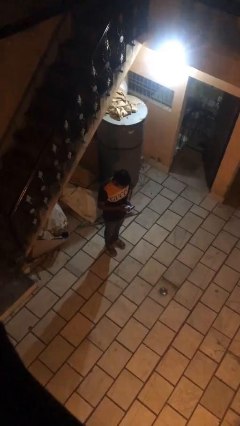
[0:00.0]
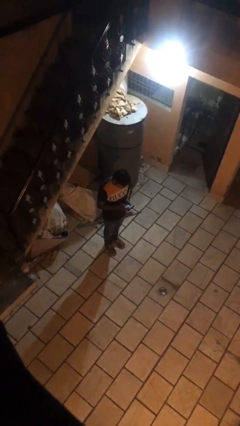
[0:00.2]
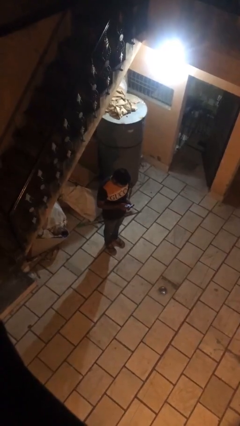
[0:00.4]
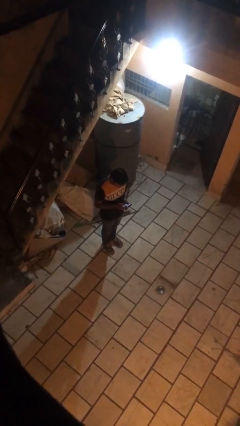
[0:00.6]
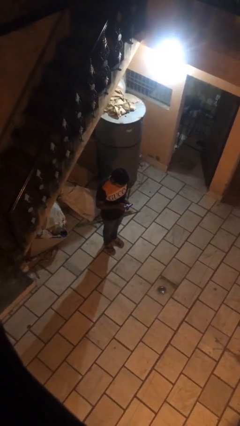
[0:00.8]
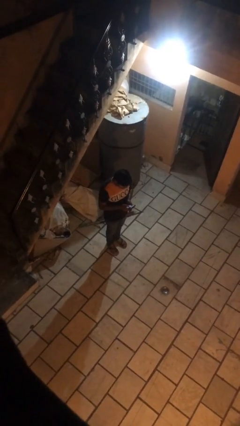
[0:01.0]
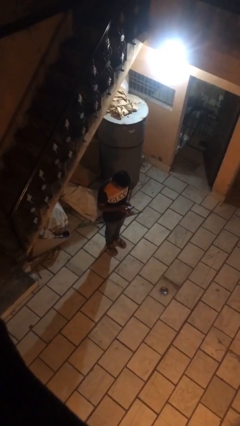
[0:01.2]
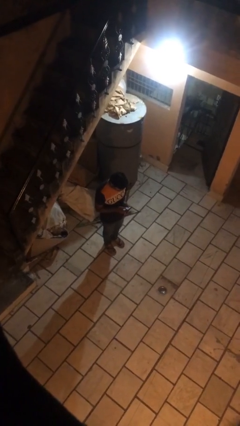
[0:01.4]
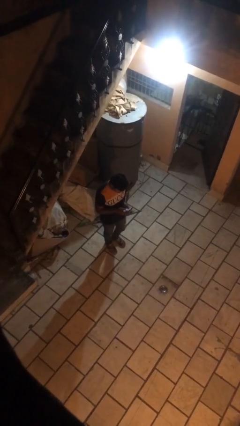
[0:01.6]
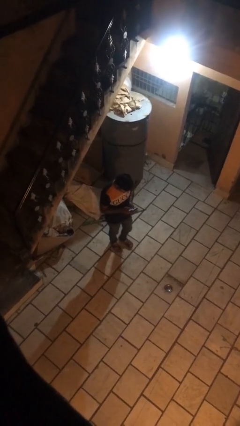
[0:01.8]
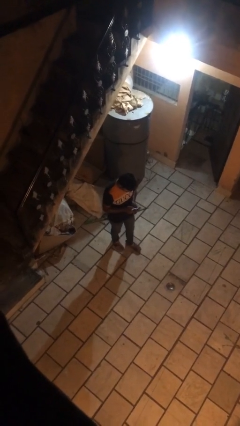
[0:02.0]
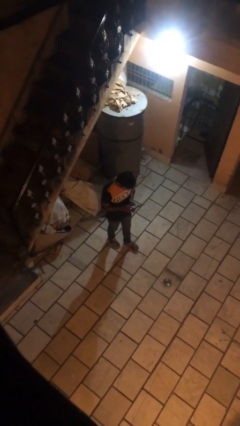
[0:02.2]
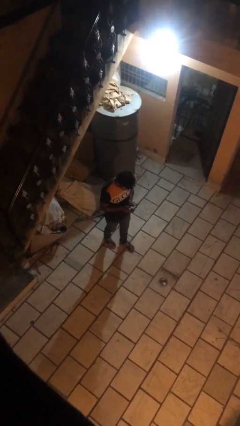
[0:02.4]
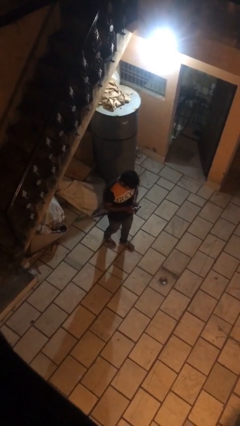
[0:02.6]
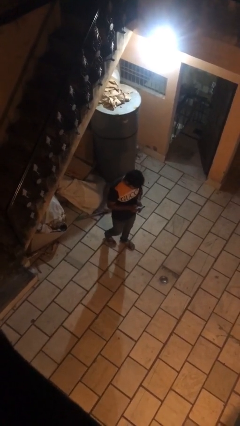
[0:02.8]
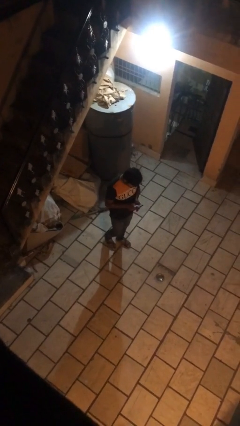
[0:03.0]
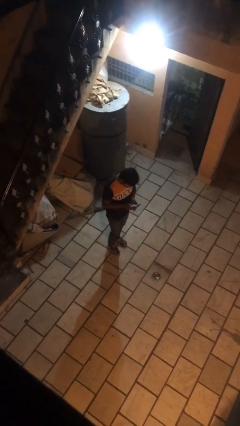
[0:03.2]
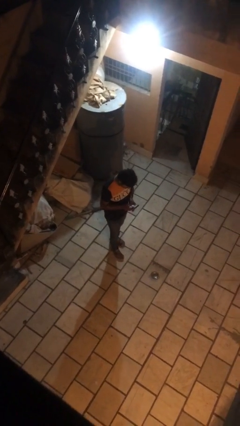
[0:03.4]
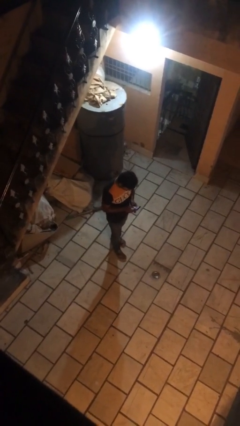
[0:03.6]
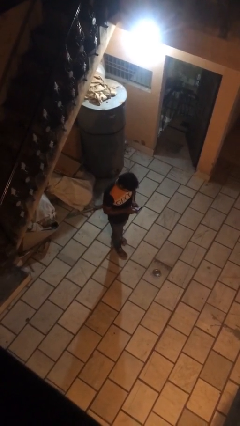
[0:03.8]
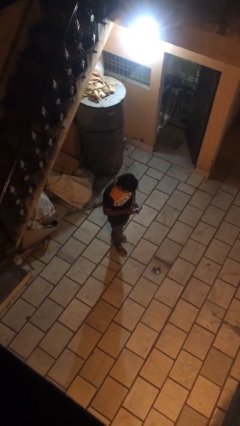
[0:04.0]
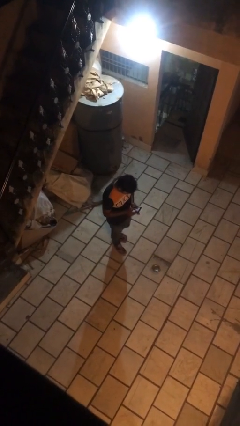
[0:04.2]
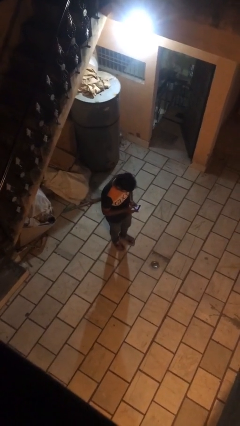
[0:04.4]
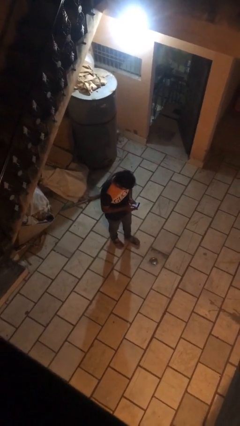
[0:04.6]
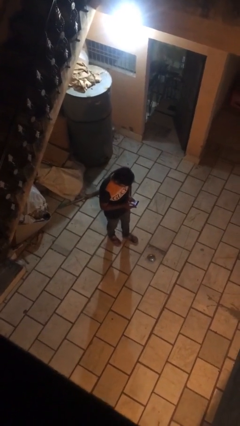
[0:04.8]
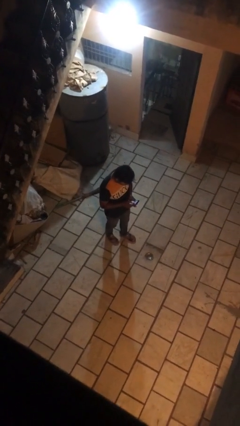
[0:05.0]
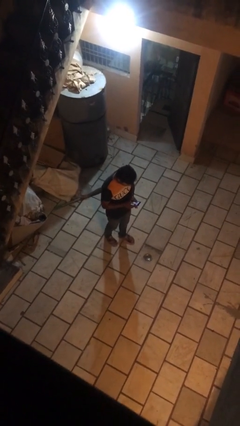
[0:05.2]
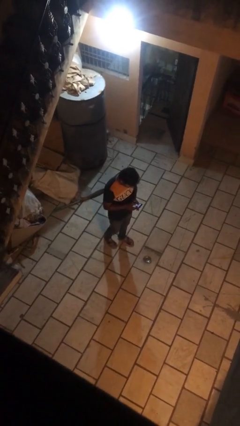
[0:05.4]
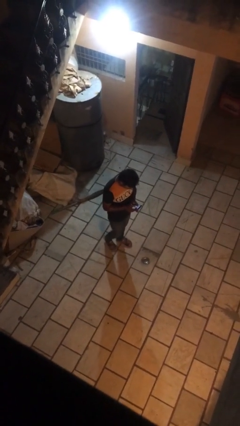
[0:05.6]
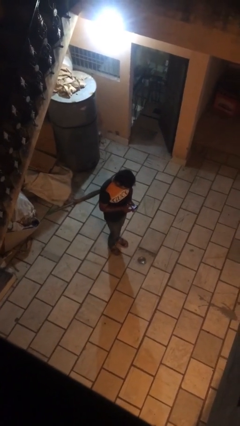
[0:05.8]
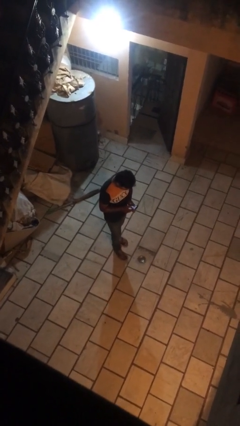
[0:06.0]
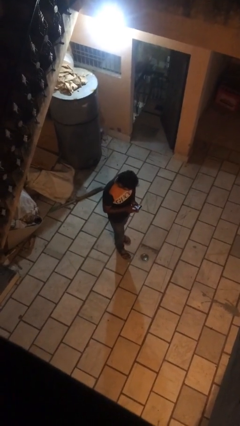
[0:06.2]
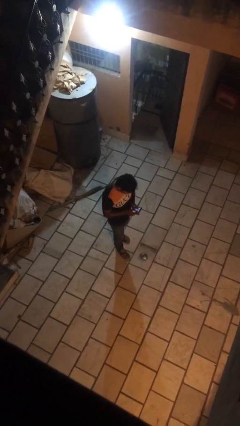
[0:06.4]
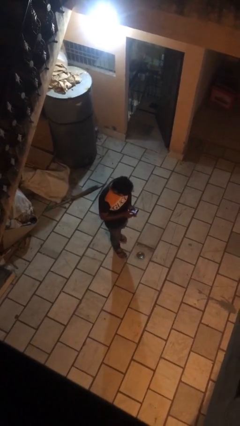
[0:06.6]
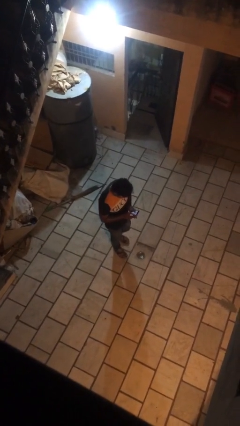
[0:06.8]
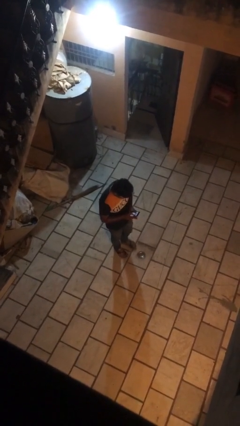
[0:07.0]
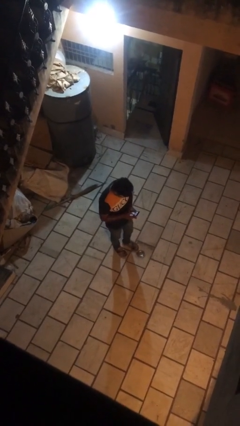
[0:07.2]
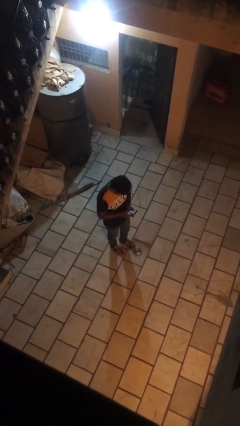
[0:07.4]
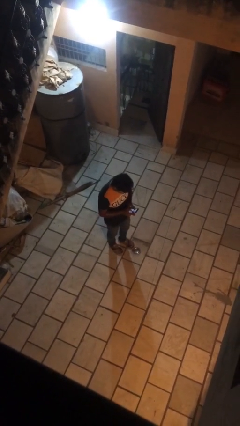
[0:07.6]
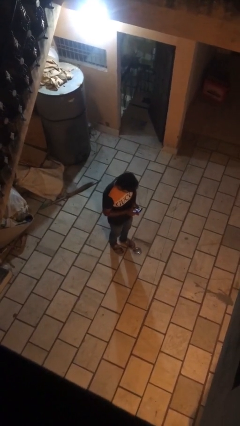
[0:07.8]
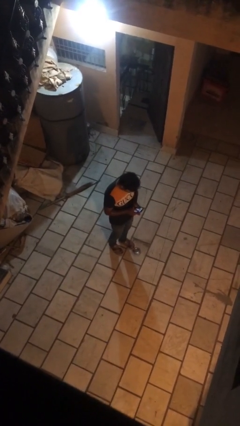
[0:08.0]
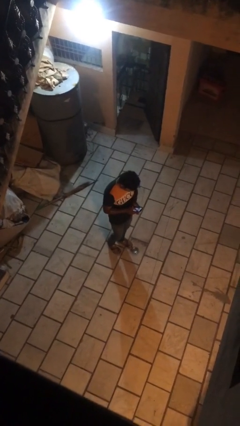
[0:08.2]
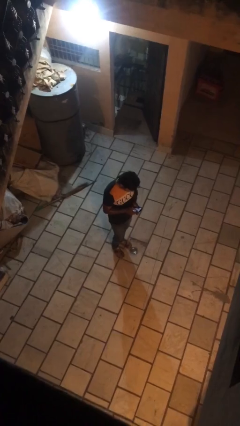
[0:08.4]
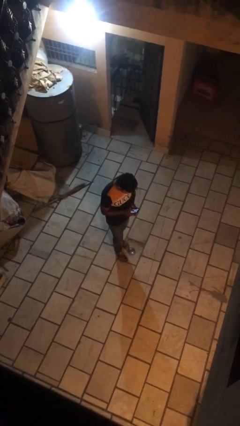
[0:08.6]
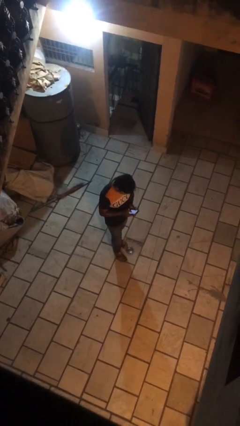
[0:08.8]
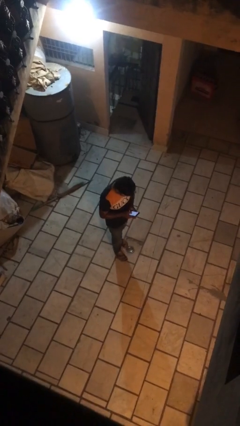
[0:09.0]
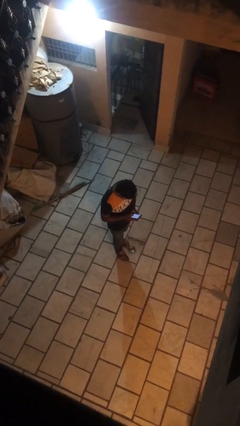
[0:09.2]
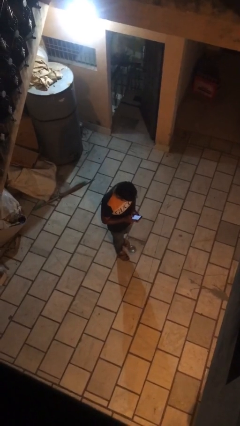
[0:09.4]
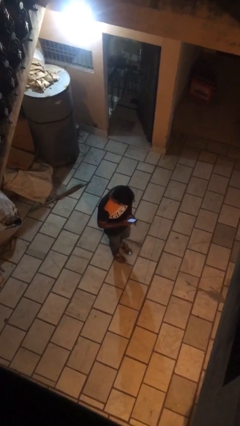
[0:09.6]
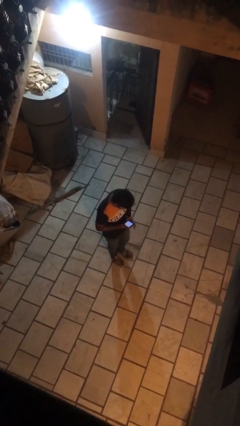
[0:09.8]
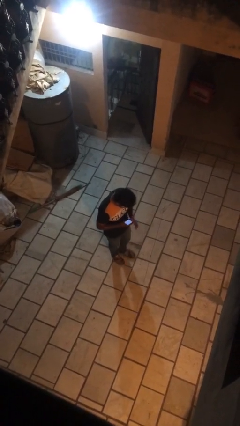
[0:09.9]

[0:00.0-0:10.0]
person texts on phone

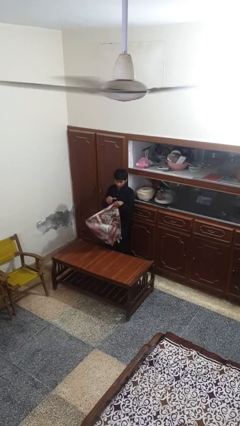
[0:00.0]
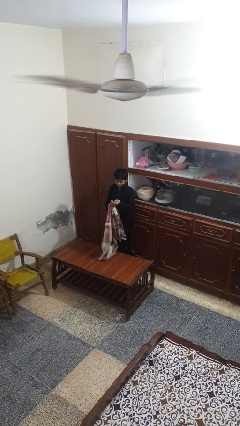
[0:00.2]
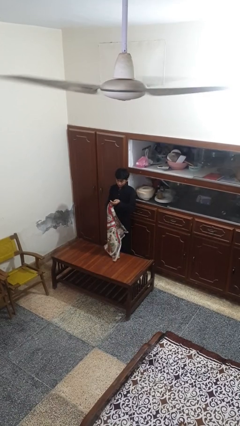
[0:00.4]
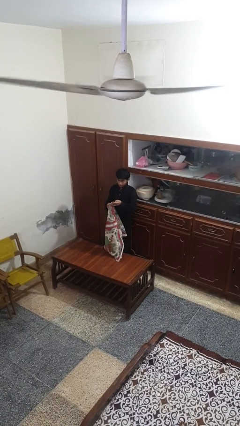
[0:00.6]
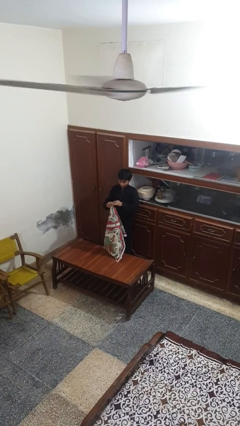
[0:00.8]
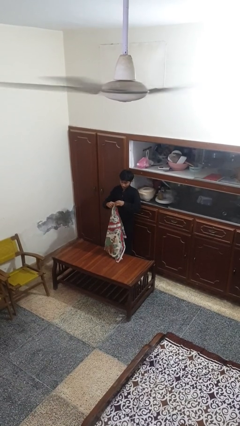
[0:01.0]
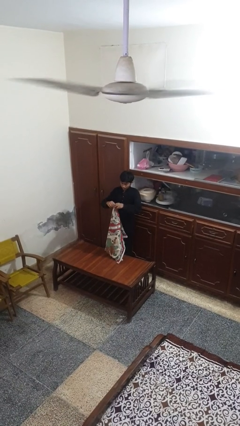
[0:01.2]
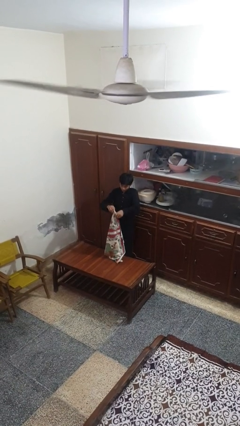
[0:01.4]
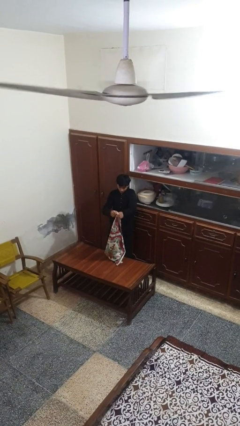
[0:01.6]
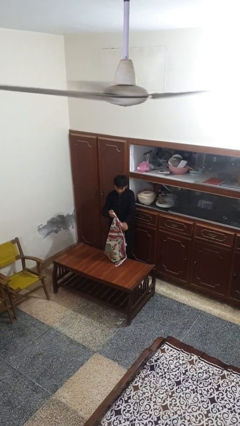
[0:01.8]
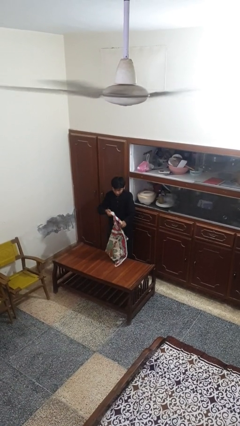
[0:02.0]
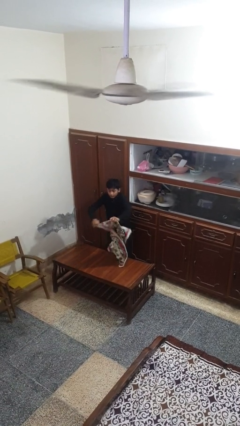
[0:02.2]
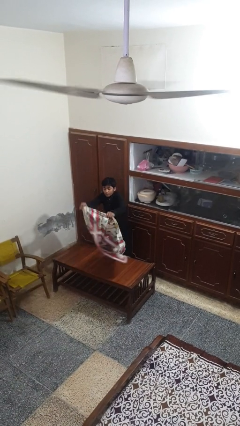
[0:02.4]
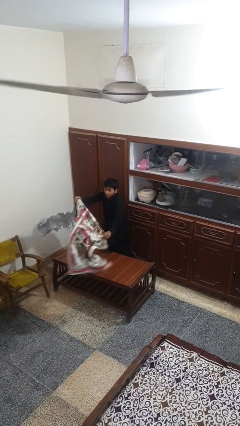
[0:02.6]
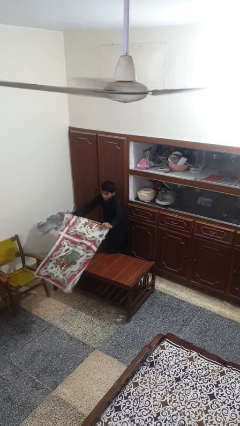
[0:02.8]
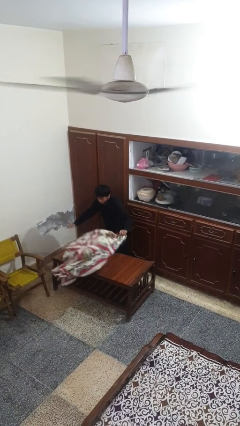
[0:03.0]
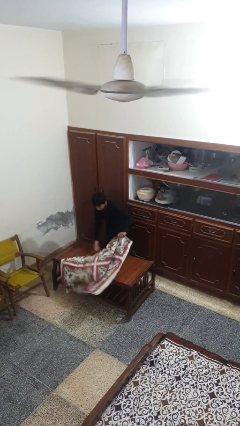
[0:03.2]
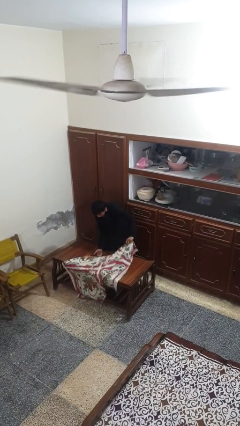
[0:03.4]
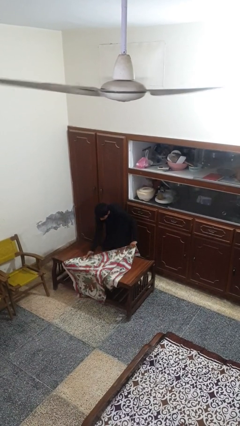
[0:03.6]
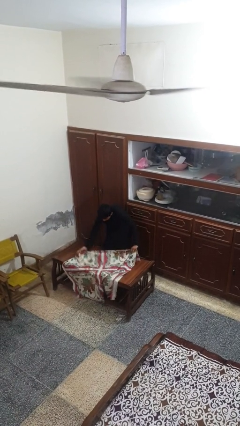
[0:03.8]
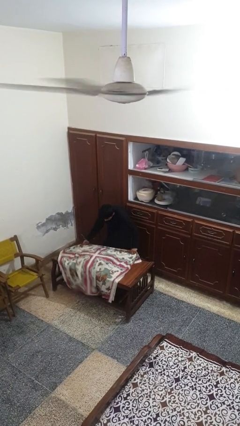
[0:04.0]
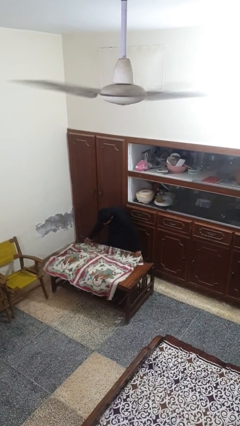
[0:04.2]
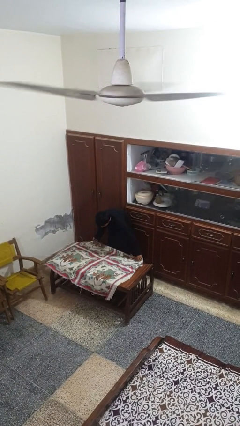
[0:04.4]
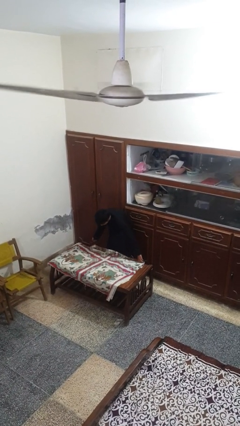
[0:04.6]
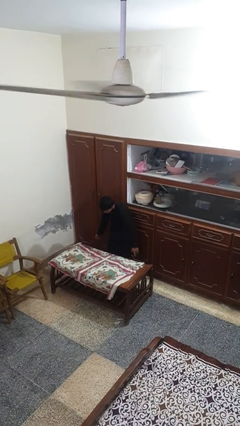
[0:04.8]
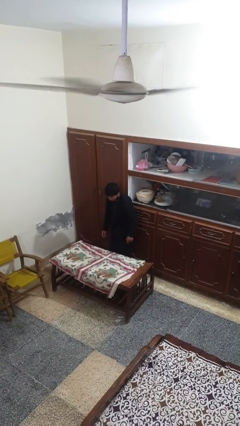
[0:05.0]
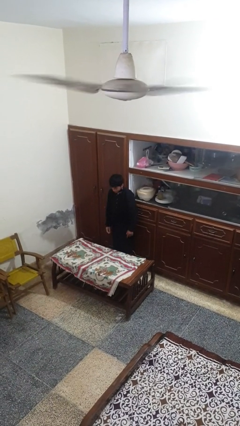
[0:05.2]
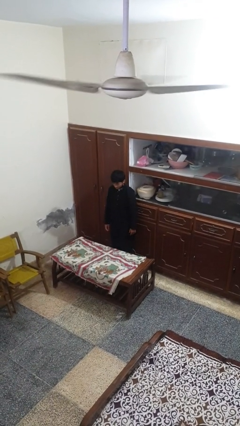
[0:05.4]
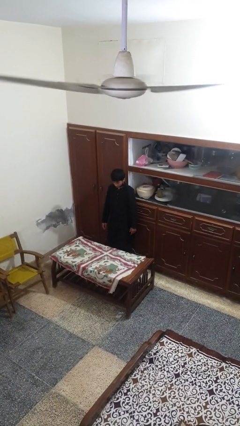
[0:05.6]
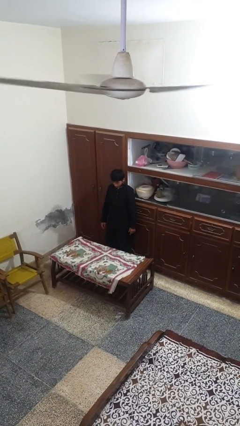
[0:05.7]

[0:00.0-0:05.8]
person spreads tablecloth

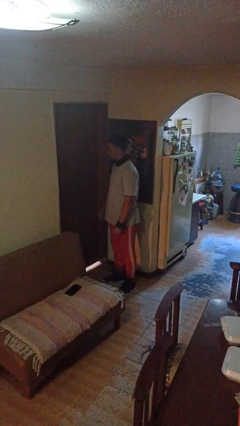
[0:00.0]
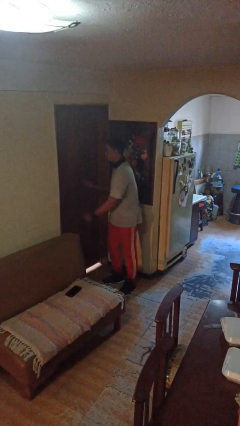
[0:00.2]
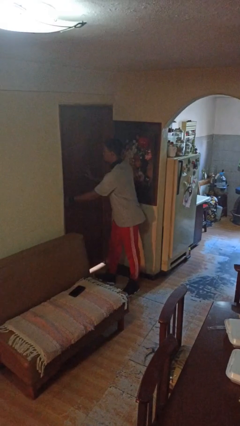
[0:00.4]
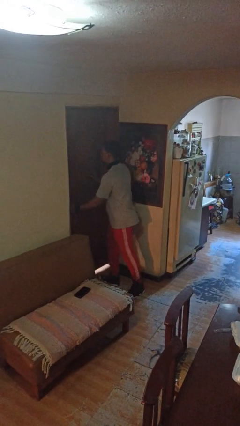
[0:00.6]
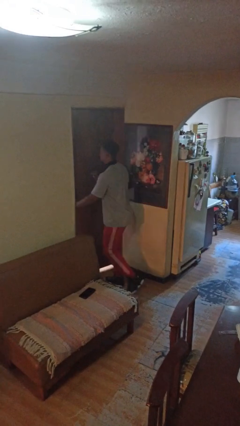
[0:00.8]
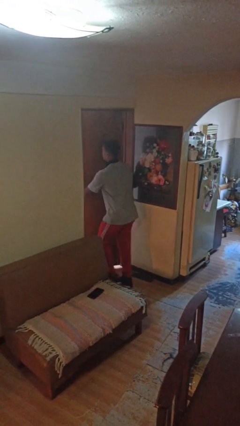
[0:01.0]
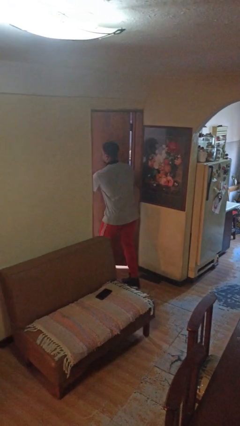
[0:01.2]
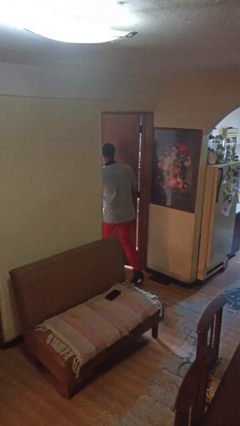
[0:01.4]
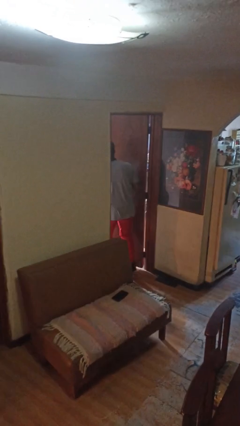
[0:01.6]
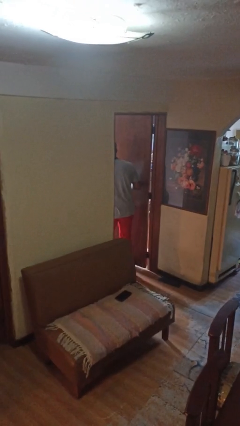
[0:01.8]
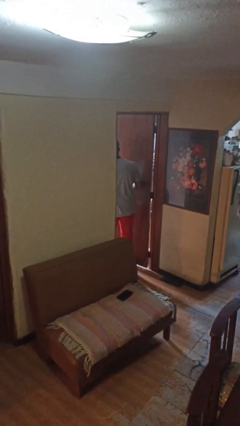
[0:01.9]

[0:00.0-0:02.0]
person opens facility door
